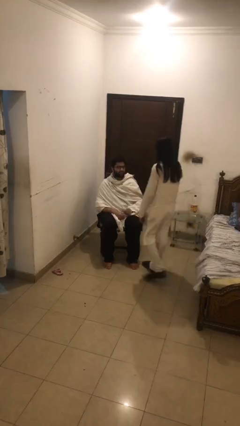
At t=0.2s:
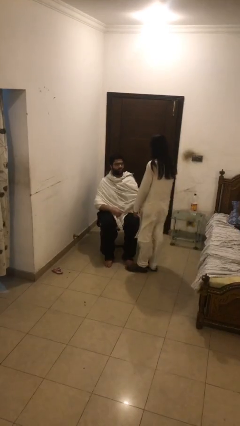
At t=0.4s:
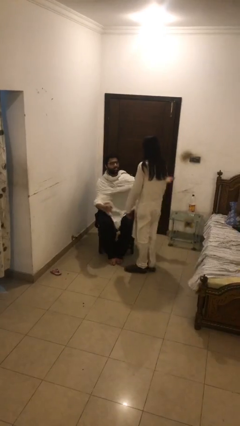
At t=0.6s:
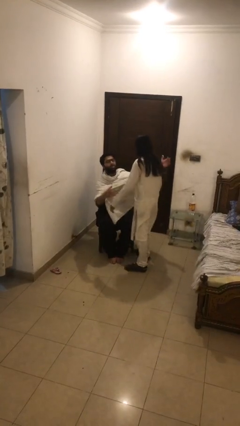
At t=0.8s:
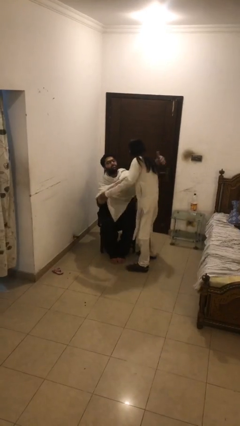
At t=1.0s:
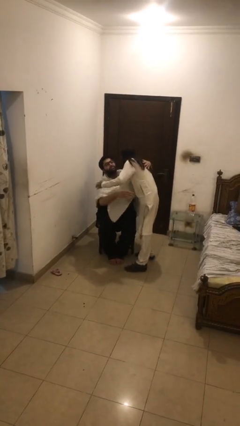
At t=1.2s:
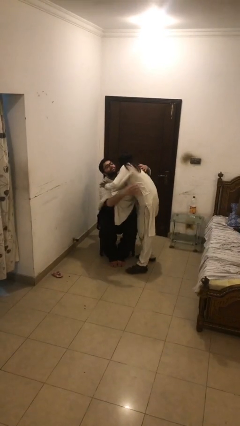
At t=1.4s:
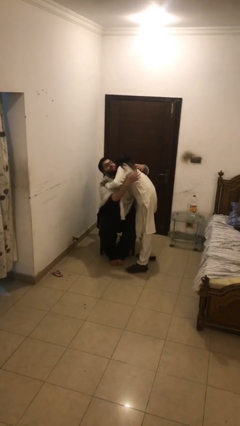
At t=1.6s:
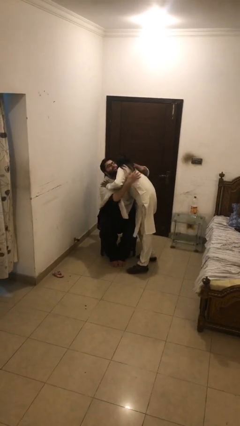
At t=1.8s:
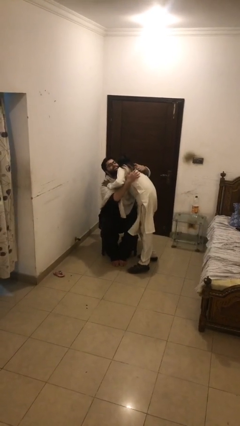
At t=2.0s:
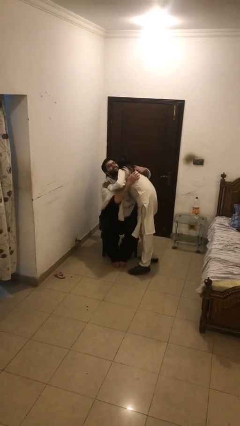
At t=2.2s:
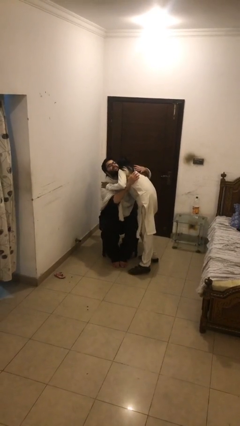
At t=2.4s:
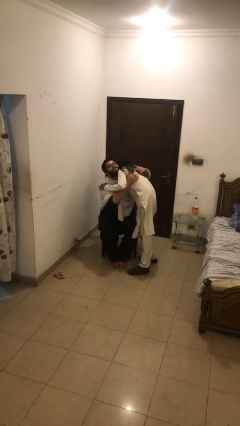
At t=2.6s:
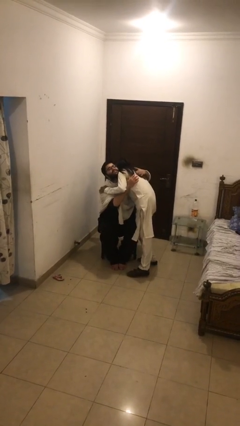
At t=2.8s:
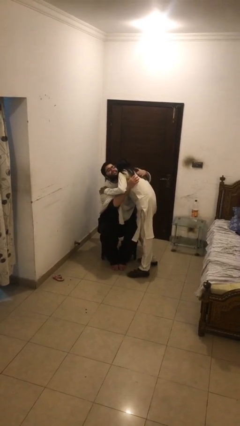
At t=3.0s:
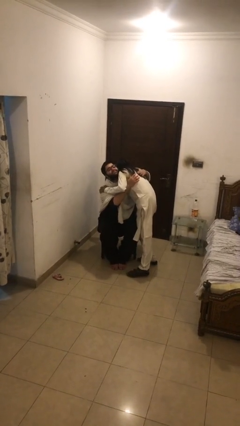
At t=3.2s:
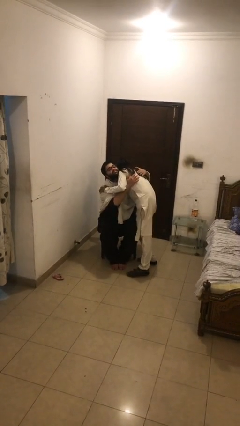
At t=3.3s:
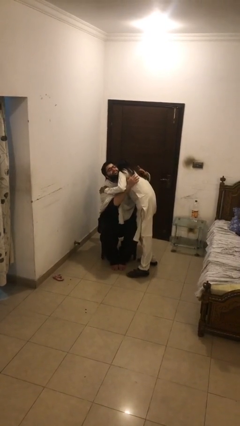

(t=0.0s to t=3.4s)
person embraces person

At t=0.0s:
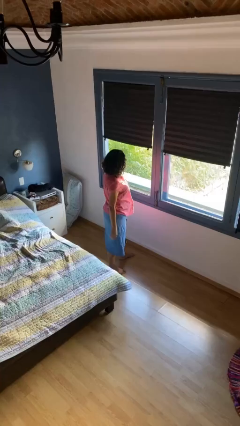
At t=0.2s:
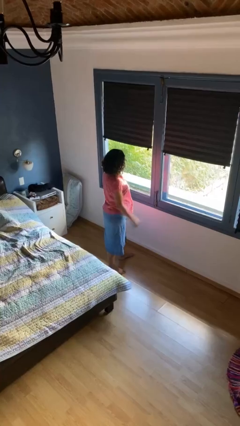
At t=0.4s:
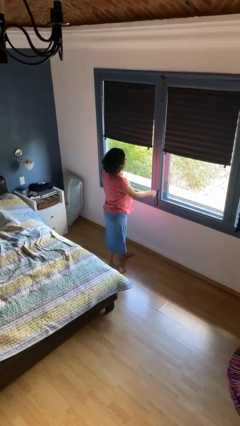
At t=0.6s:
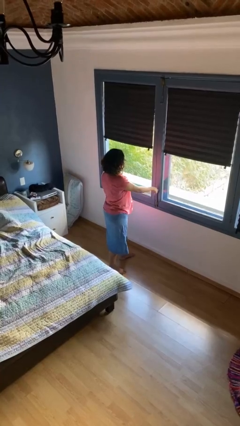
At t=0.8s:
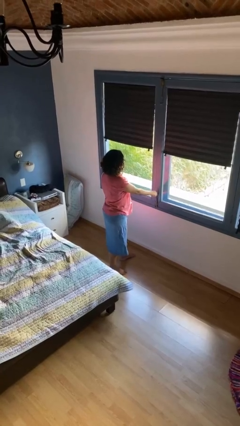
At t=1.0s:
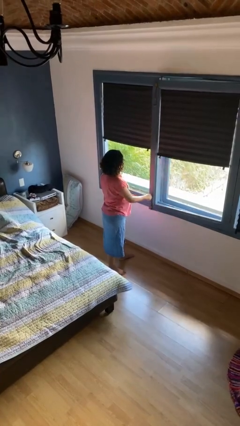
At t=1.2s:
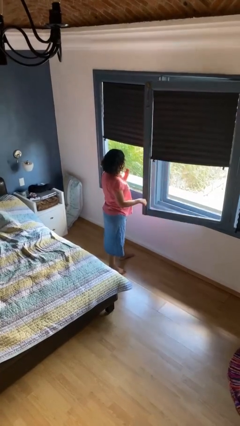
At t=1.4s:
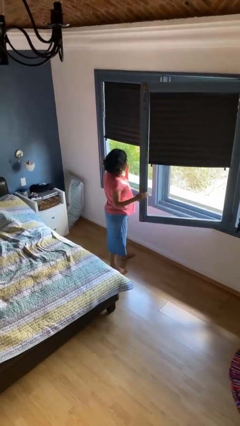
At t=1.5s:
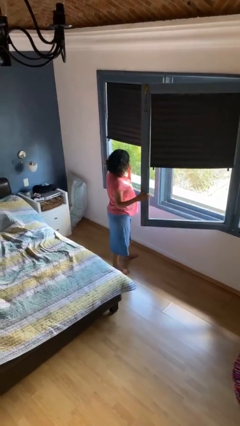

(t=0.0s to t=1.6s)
person opens home window

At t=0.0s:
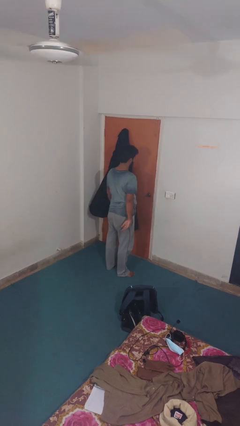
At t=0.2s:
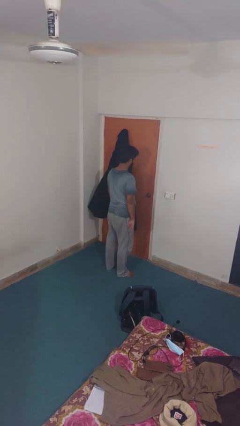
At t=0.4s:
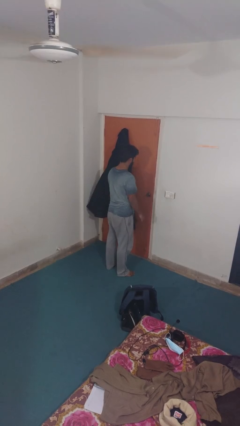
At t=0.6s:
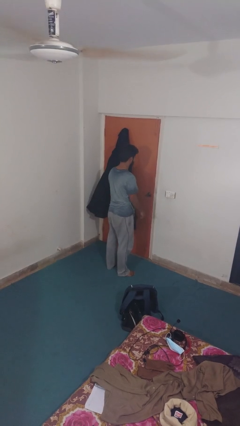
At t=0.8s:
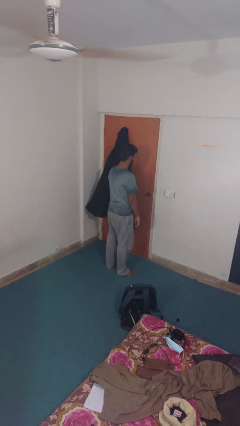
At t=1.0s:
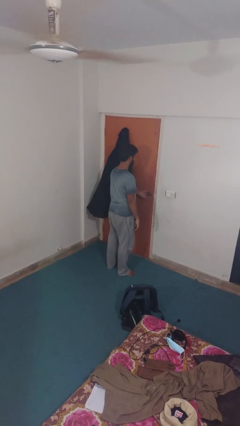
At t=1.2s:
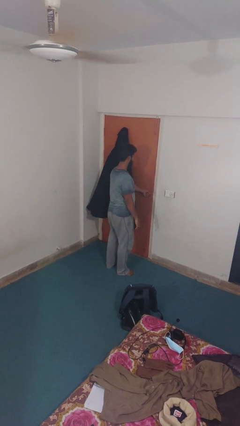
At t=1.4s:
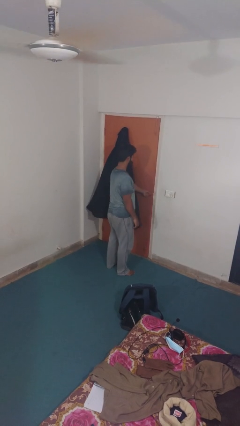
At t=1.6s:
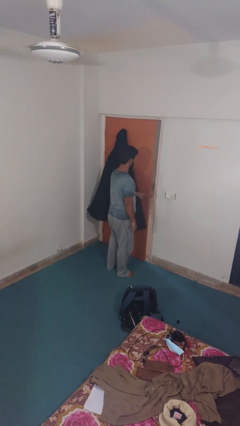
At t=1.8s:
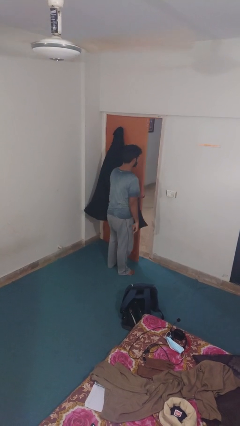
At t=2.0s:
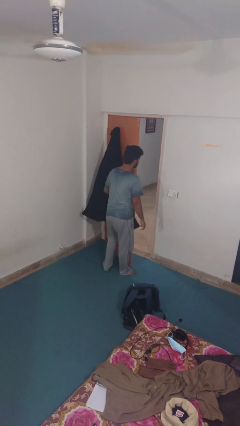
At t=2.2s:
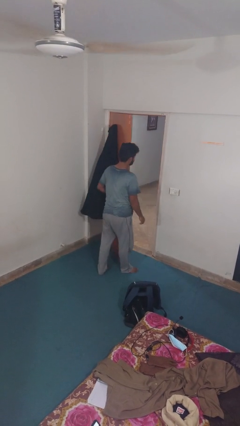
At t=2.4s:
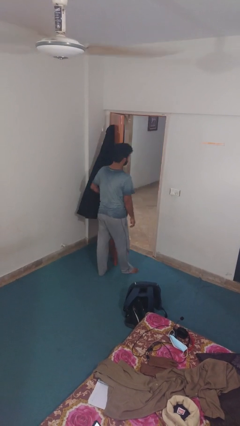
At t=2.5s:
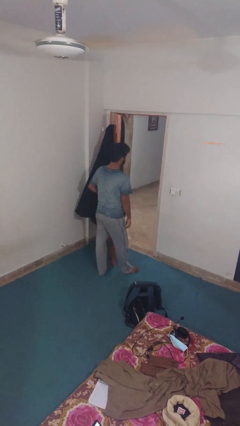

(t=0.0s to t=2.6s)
person opens facility door

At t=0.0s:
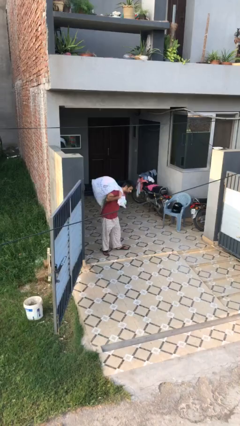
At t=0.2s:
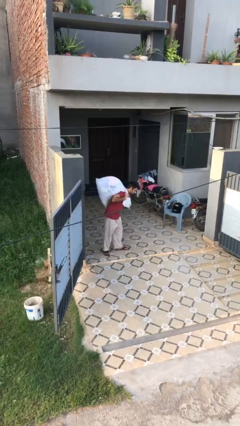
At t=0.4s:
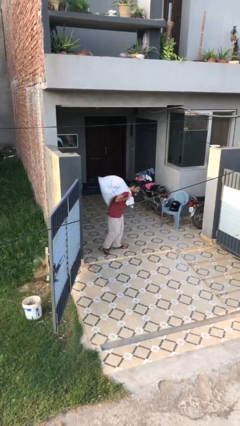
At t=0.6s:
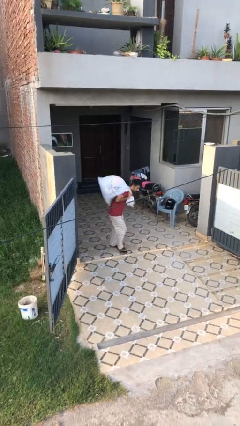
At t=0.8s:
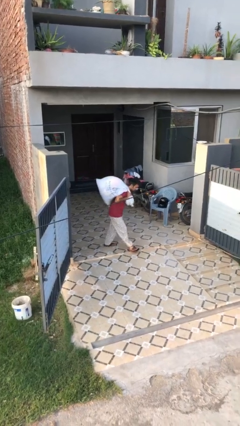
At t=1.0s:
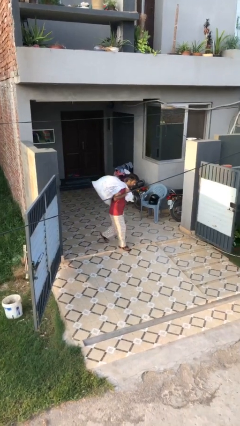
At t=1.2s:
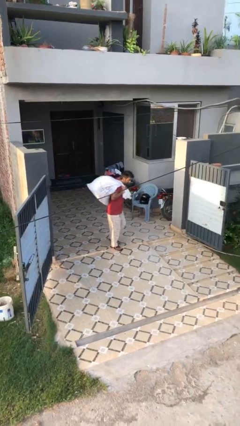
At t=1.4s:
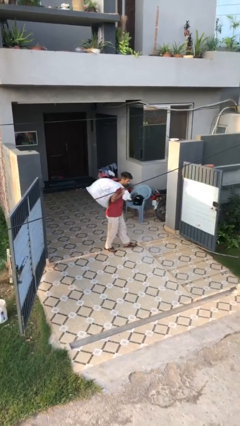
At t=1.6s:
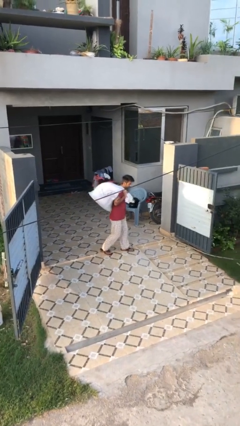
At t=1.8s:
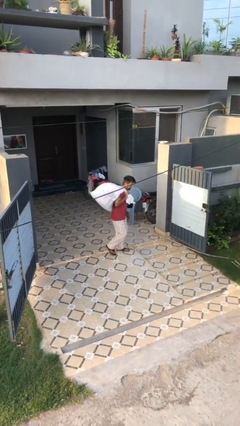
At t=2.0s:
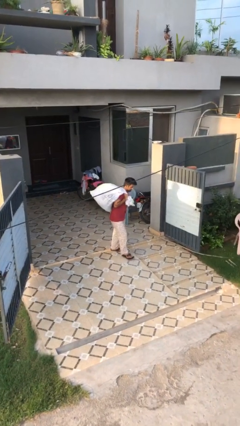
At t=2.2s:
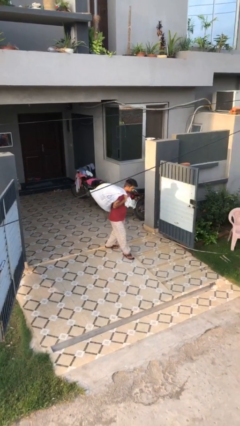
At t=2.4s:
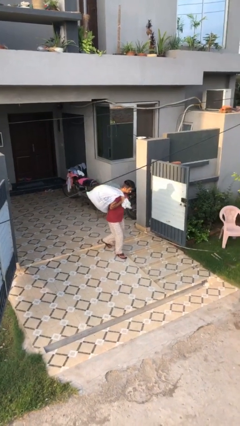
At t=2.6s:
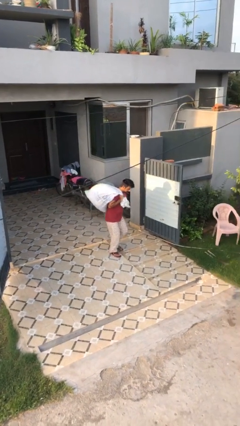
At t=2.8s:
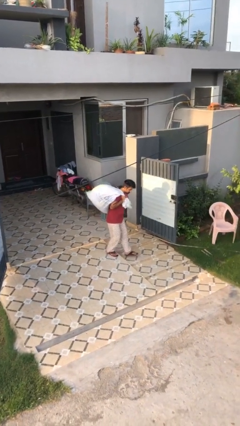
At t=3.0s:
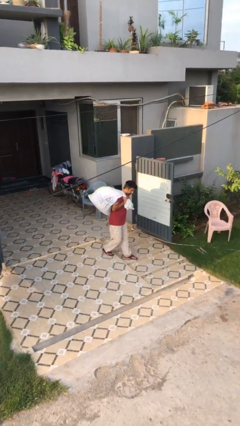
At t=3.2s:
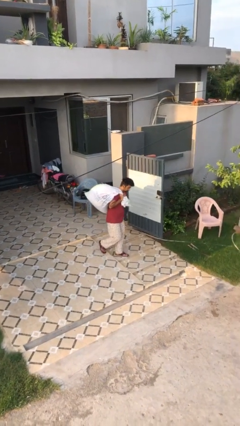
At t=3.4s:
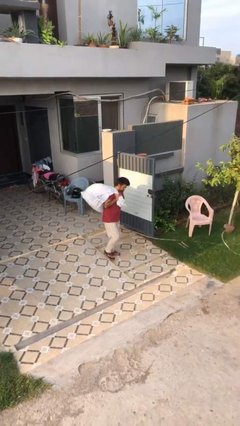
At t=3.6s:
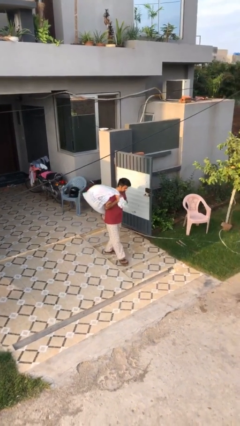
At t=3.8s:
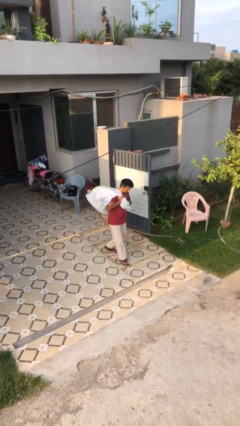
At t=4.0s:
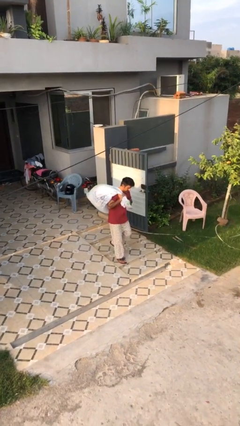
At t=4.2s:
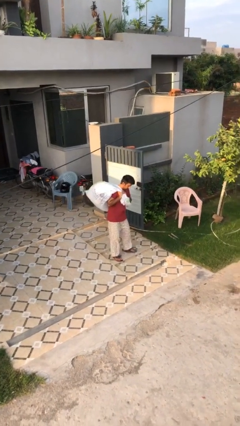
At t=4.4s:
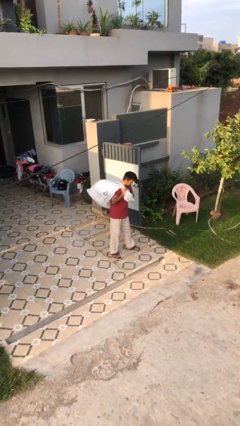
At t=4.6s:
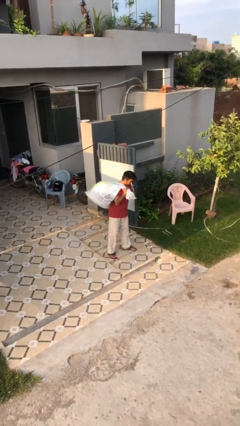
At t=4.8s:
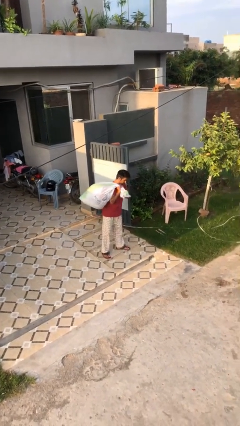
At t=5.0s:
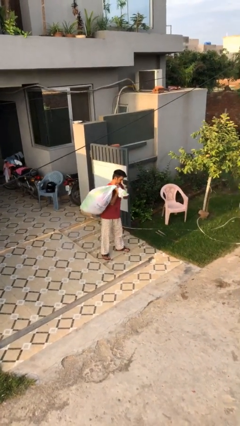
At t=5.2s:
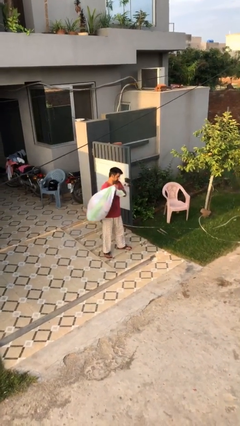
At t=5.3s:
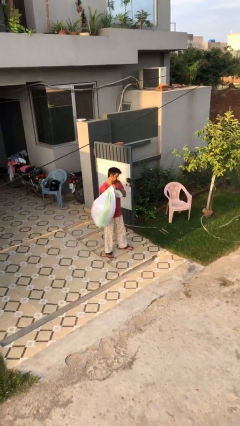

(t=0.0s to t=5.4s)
person carries heavy object

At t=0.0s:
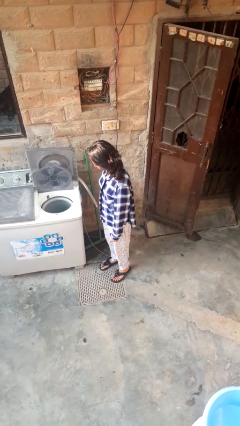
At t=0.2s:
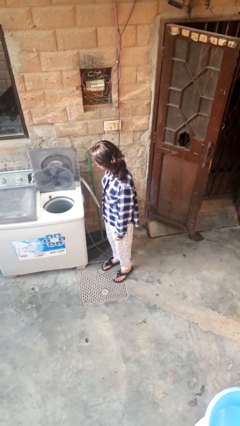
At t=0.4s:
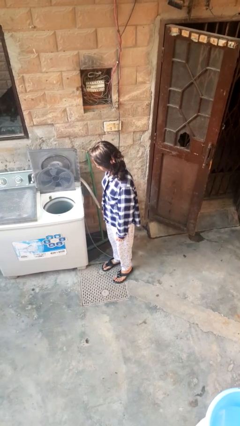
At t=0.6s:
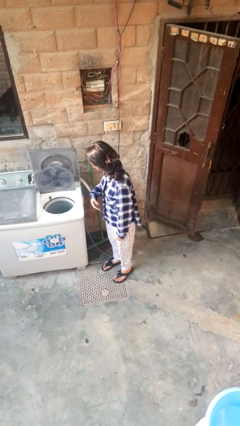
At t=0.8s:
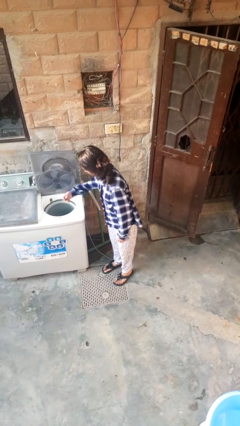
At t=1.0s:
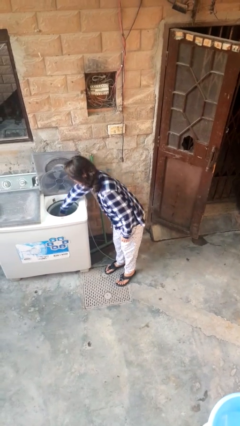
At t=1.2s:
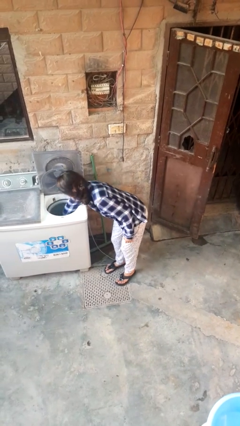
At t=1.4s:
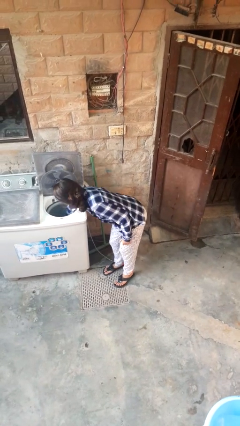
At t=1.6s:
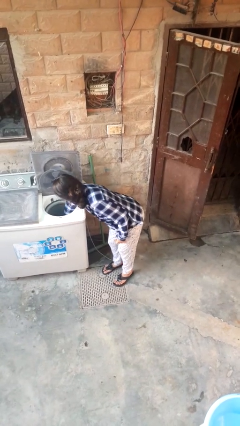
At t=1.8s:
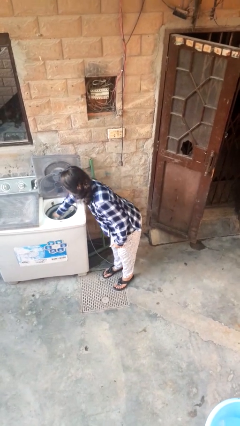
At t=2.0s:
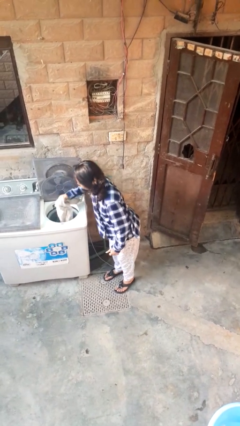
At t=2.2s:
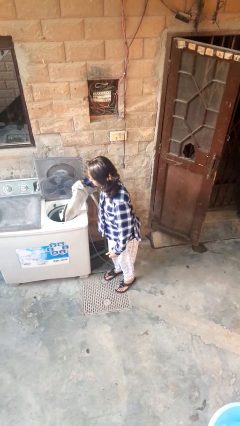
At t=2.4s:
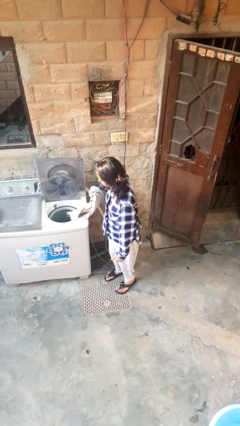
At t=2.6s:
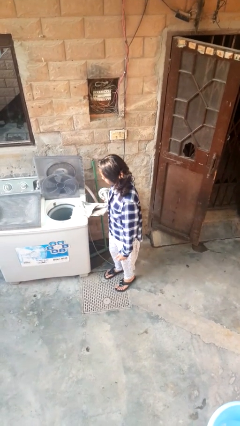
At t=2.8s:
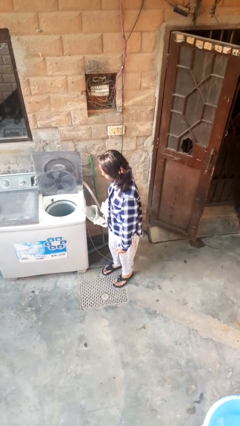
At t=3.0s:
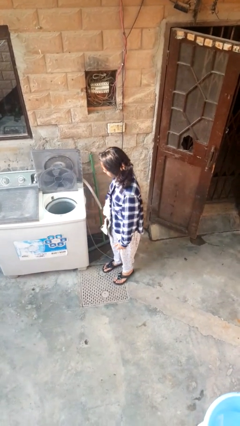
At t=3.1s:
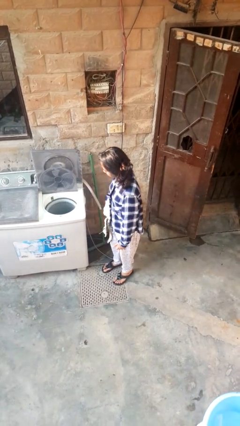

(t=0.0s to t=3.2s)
person unloads dryer

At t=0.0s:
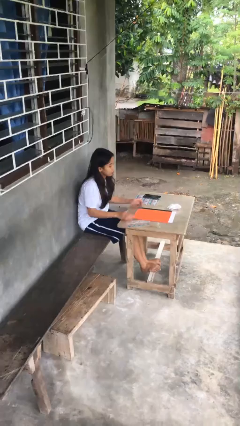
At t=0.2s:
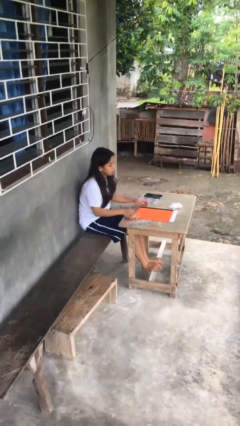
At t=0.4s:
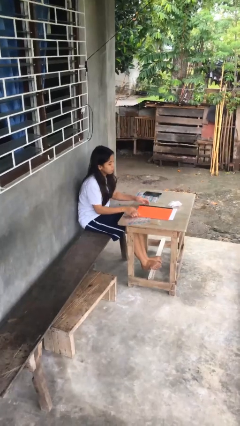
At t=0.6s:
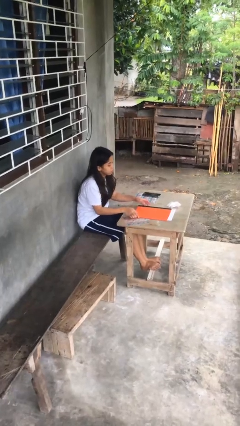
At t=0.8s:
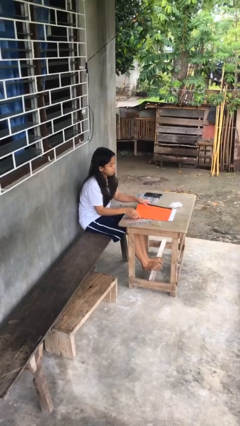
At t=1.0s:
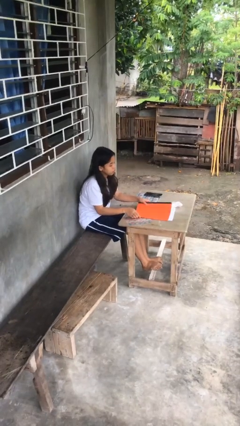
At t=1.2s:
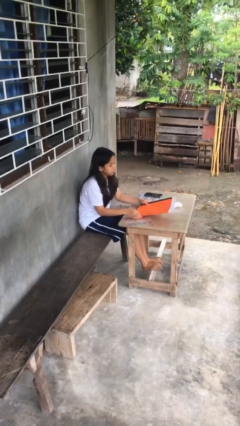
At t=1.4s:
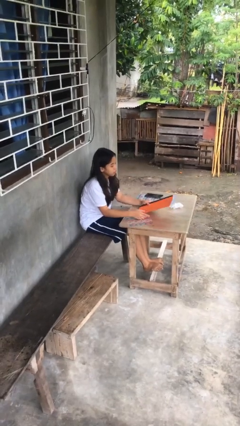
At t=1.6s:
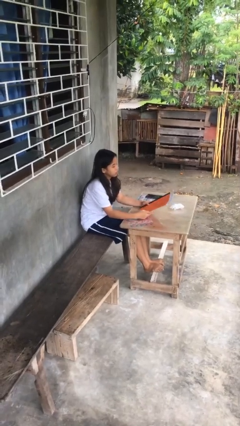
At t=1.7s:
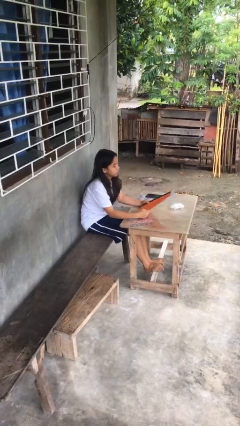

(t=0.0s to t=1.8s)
person picks up object from table
